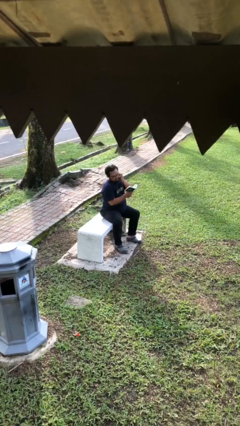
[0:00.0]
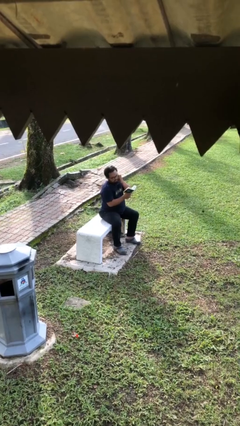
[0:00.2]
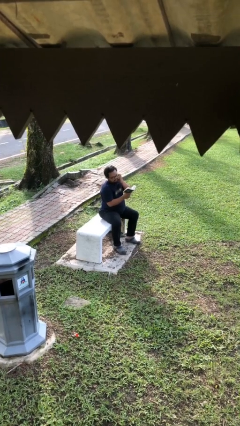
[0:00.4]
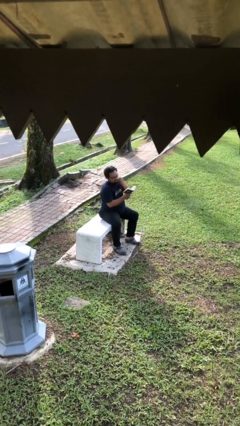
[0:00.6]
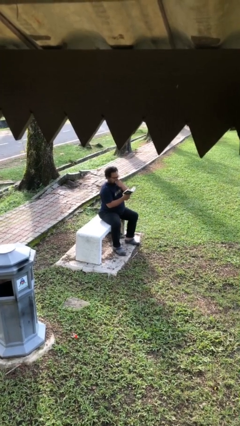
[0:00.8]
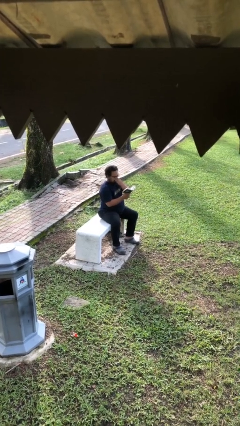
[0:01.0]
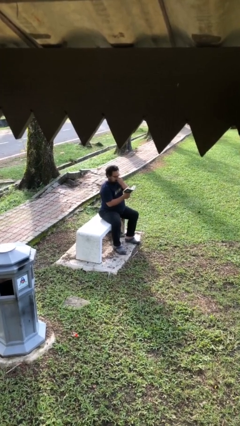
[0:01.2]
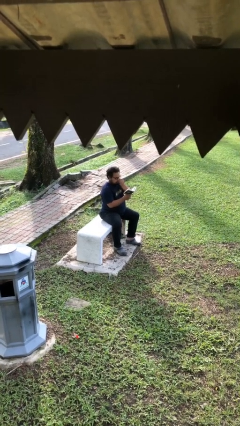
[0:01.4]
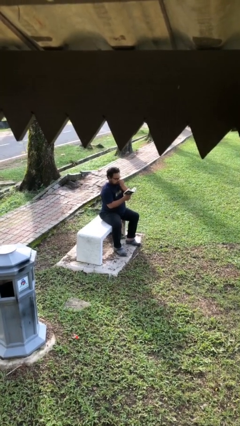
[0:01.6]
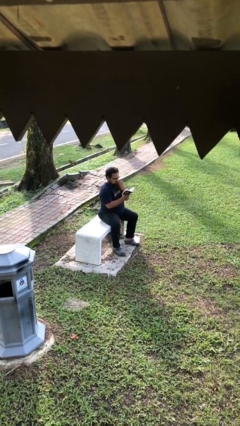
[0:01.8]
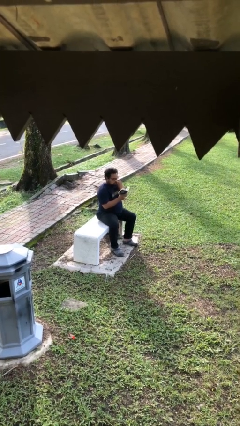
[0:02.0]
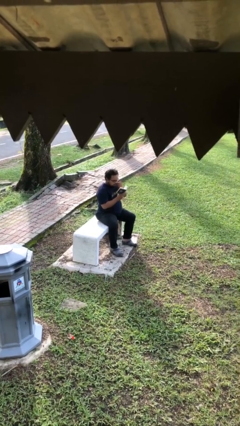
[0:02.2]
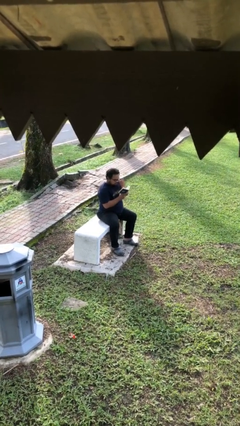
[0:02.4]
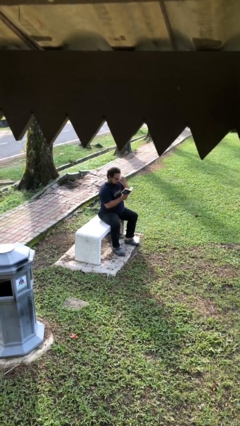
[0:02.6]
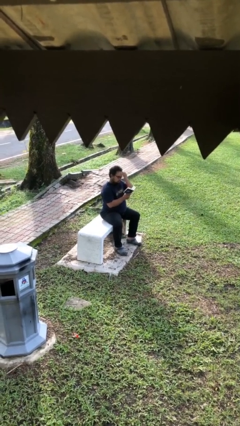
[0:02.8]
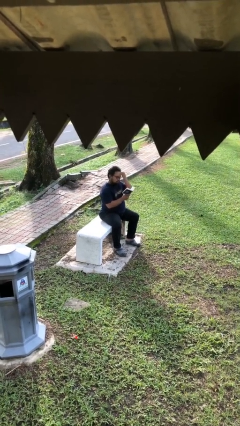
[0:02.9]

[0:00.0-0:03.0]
person reads document

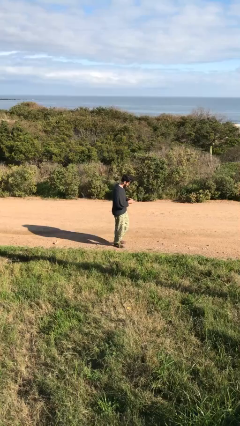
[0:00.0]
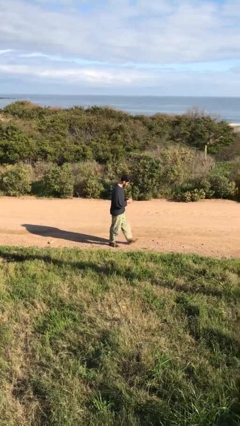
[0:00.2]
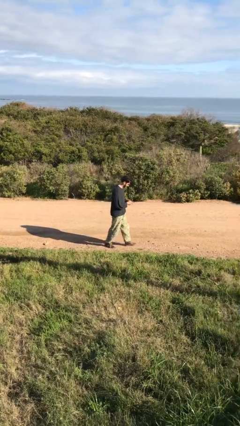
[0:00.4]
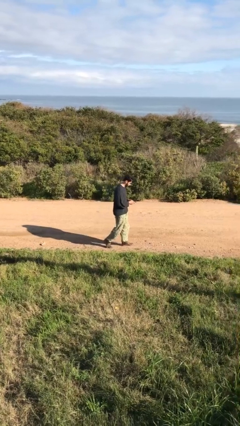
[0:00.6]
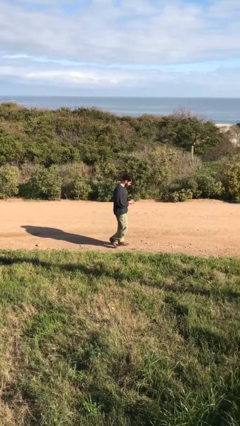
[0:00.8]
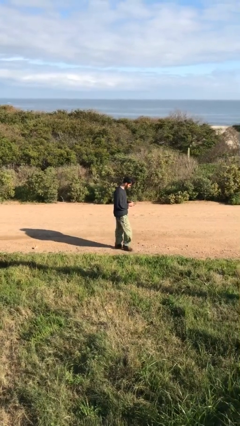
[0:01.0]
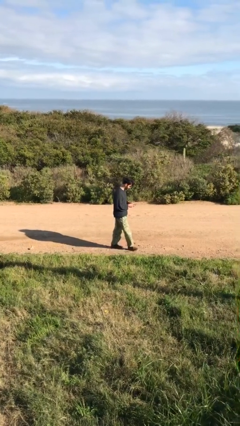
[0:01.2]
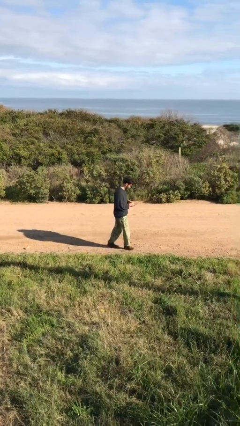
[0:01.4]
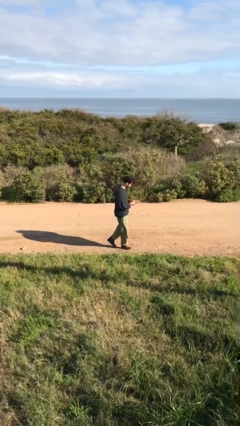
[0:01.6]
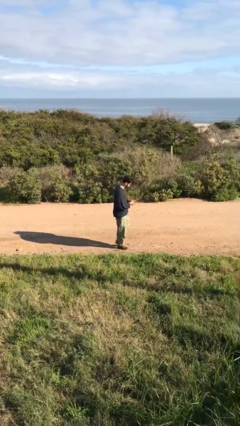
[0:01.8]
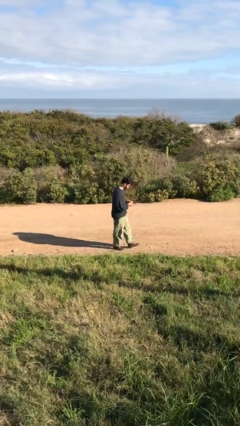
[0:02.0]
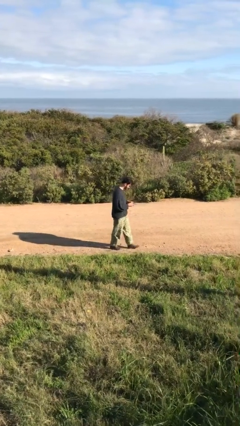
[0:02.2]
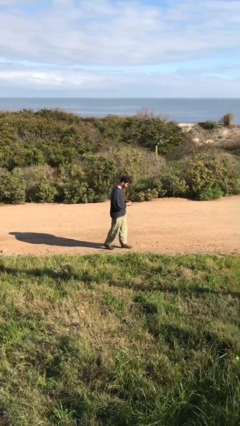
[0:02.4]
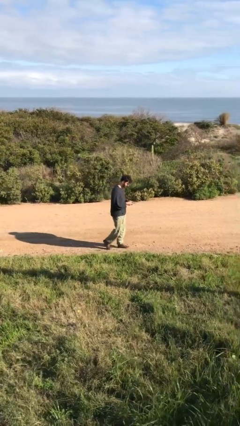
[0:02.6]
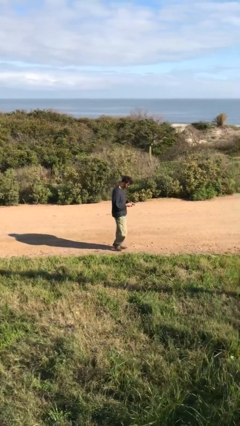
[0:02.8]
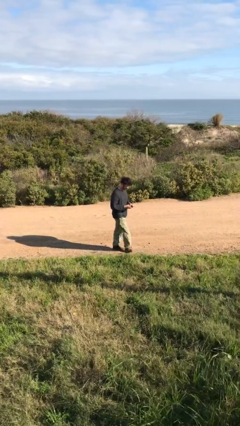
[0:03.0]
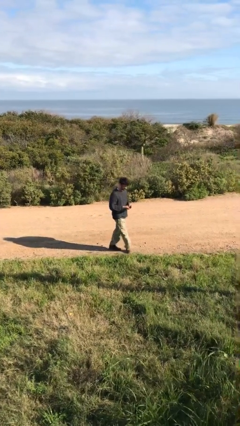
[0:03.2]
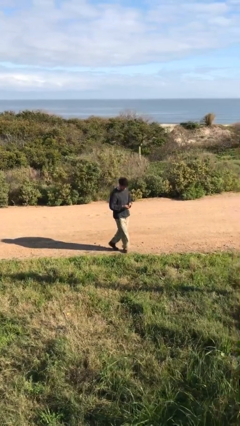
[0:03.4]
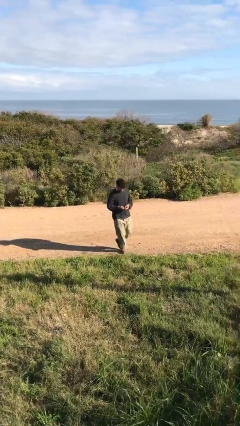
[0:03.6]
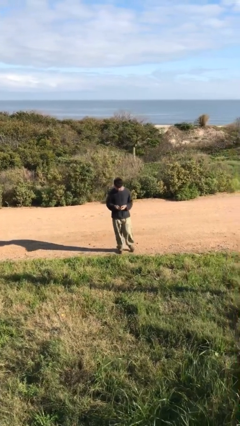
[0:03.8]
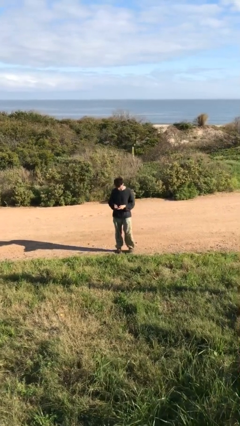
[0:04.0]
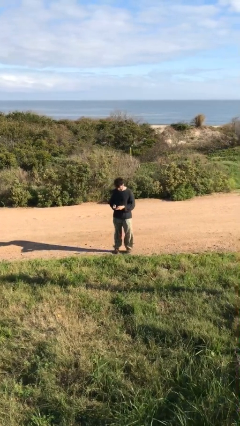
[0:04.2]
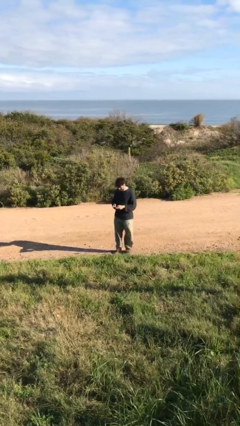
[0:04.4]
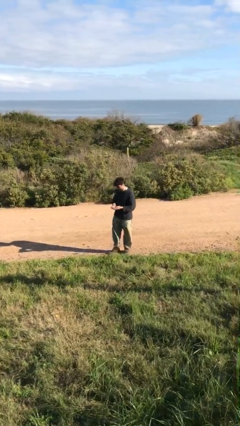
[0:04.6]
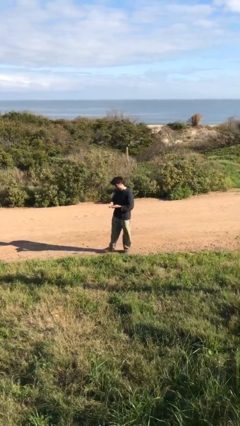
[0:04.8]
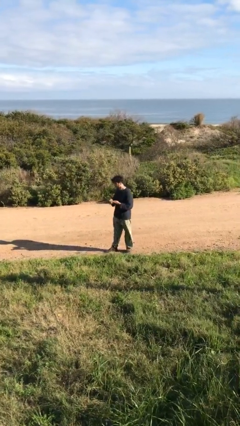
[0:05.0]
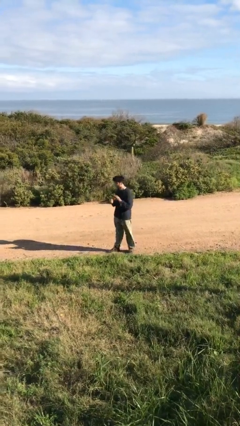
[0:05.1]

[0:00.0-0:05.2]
person texts on phone

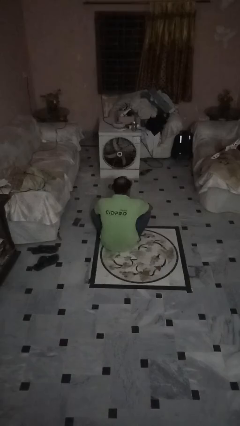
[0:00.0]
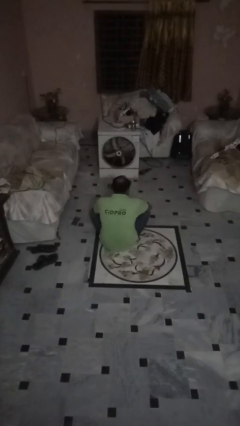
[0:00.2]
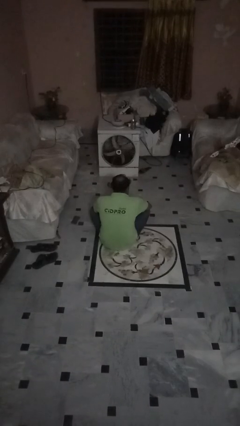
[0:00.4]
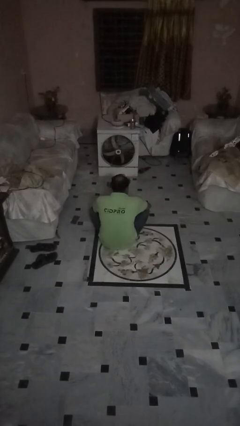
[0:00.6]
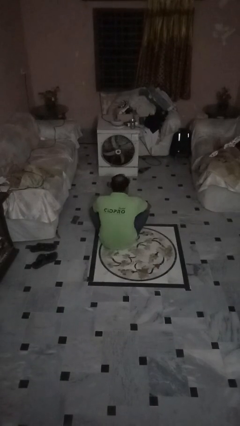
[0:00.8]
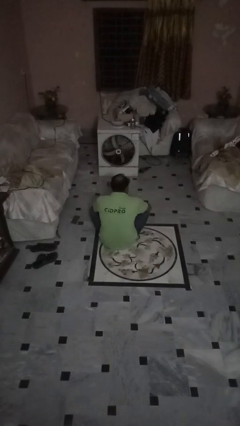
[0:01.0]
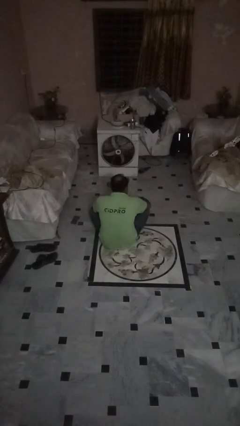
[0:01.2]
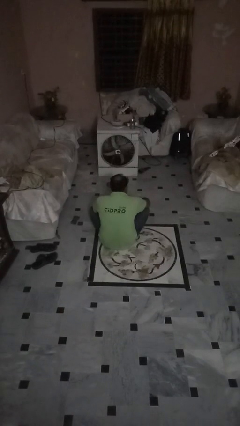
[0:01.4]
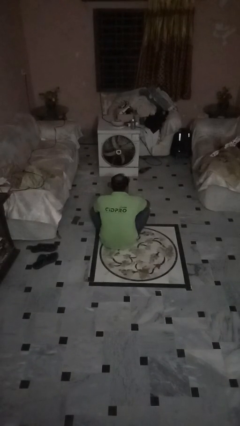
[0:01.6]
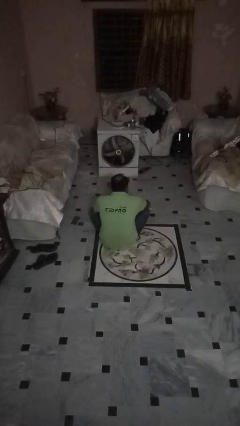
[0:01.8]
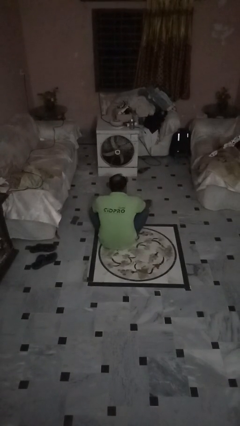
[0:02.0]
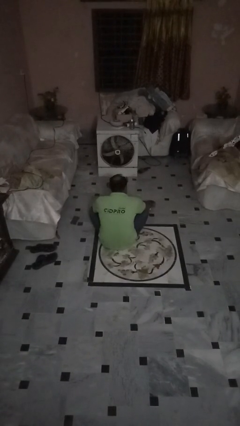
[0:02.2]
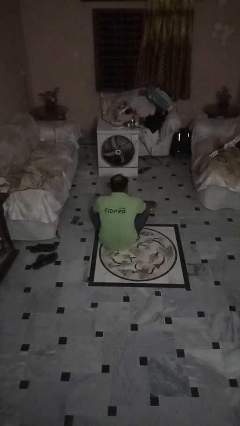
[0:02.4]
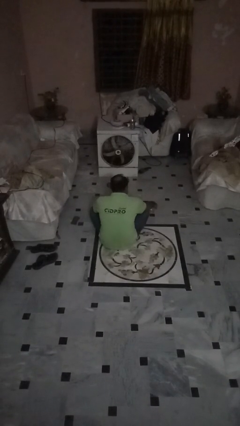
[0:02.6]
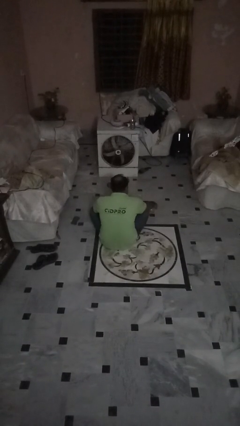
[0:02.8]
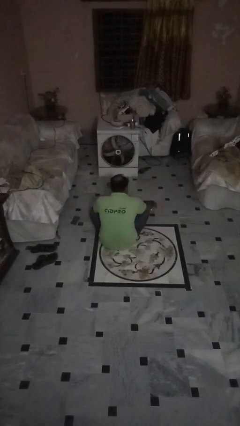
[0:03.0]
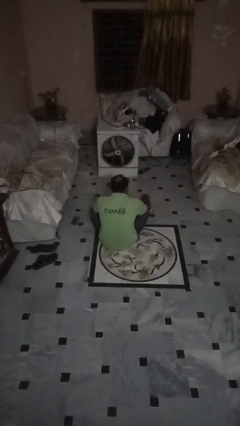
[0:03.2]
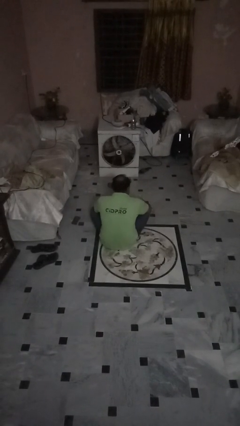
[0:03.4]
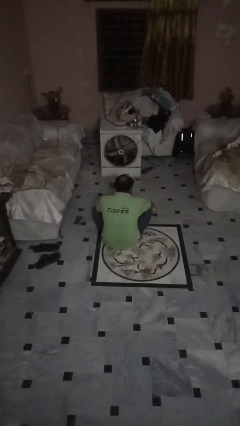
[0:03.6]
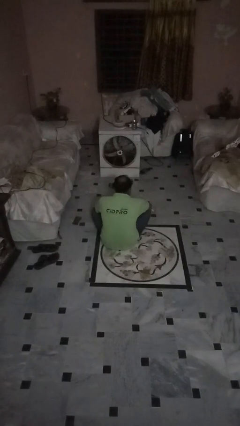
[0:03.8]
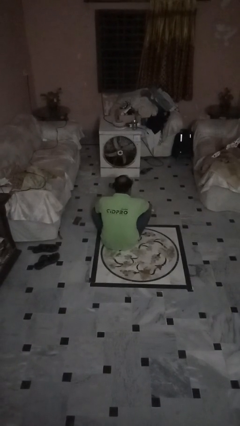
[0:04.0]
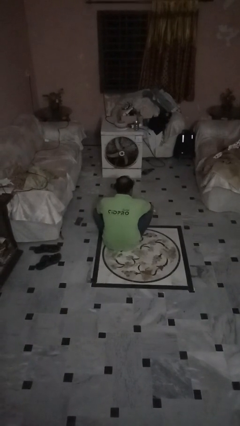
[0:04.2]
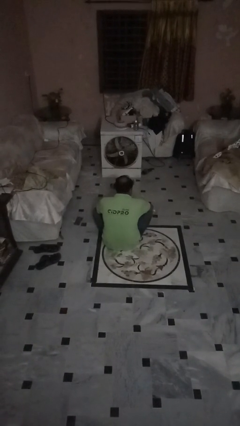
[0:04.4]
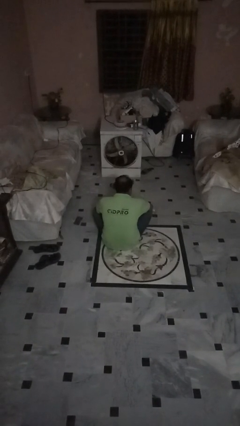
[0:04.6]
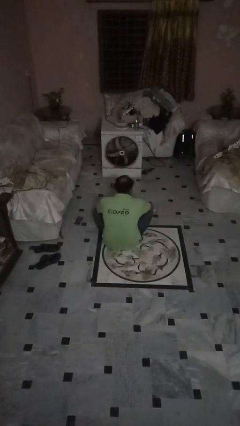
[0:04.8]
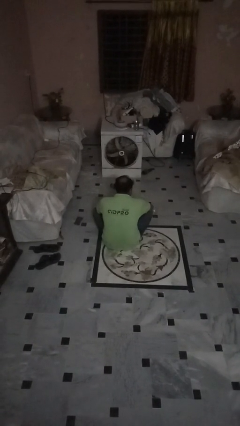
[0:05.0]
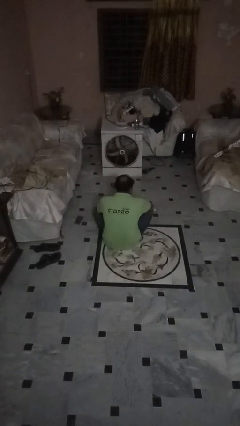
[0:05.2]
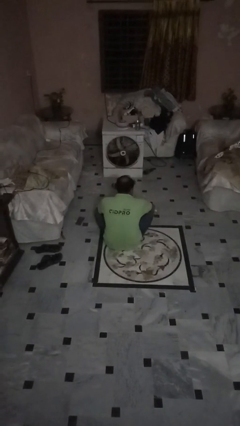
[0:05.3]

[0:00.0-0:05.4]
person sets upright glass

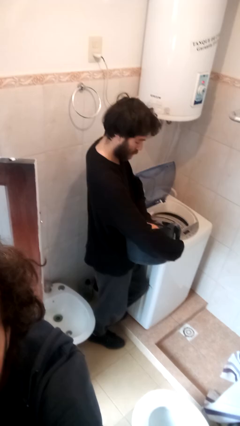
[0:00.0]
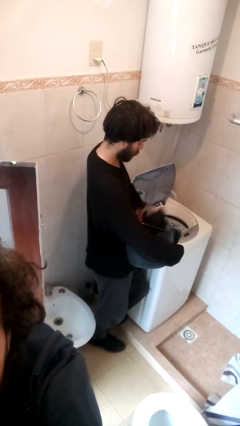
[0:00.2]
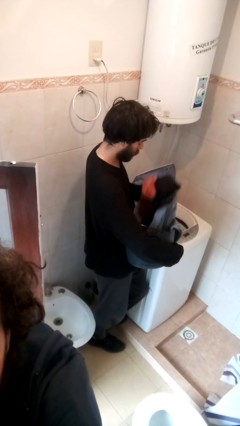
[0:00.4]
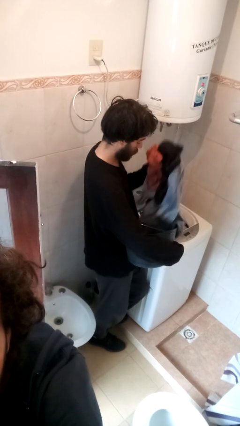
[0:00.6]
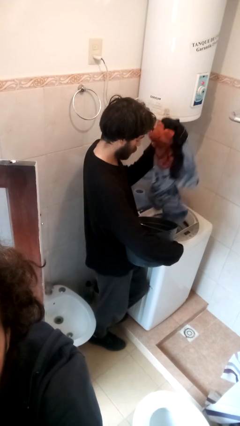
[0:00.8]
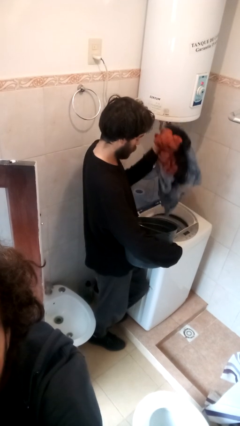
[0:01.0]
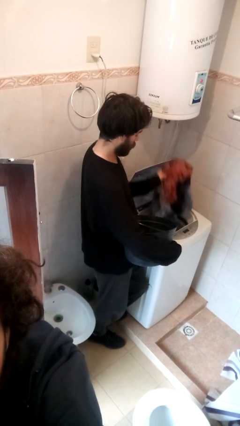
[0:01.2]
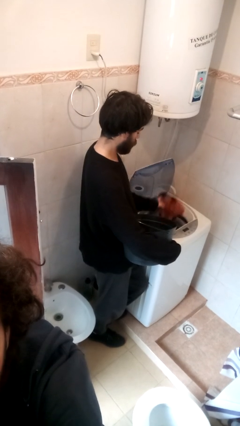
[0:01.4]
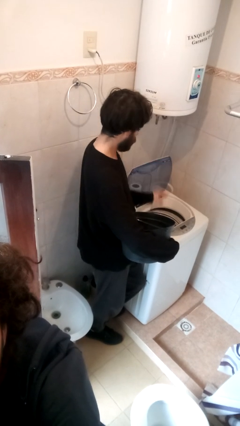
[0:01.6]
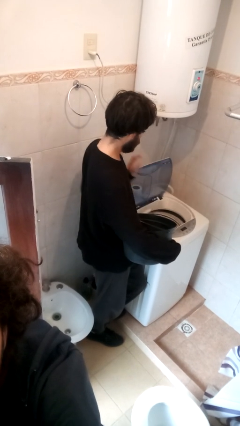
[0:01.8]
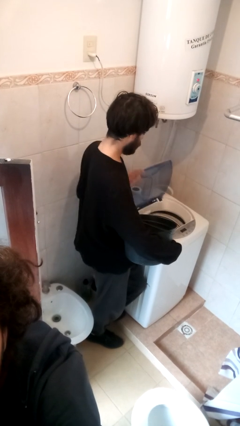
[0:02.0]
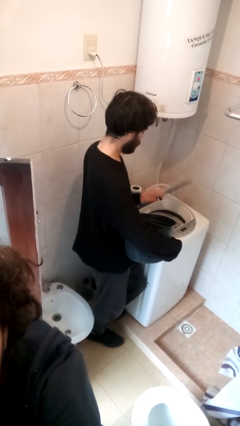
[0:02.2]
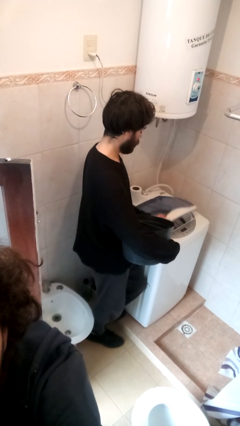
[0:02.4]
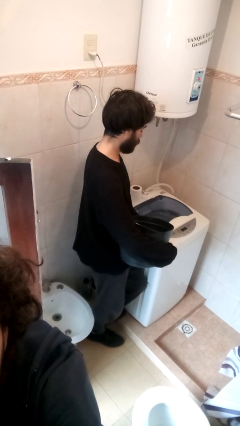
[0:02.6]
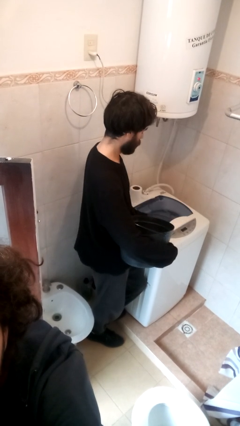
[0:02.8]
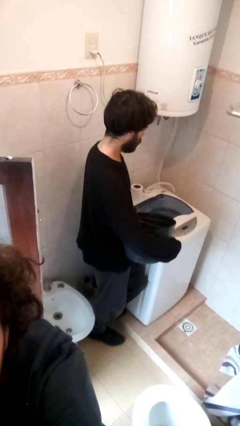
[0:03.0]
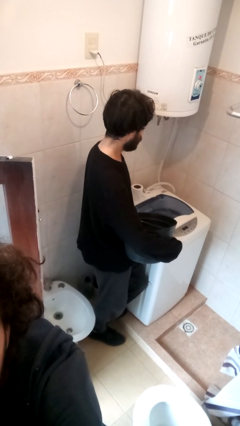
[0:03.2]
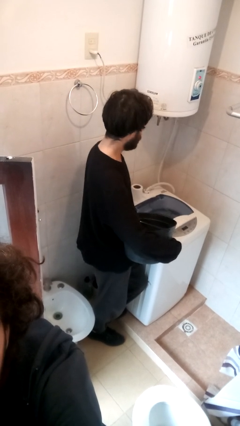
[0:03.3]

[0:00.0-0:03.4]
person loads clotheswasher

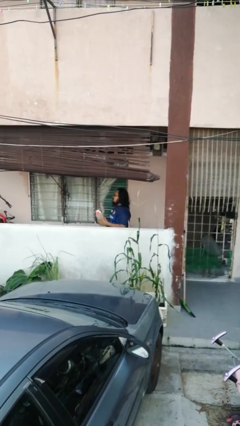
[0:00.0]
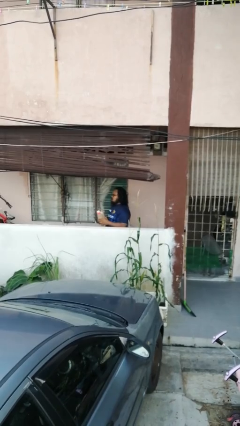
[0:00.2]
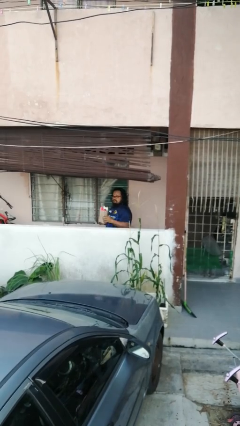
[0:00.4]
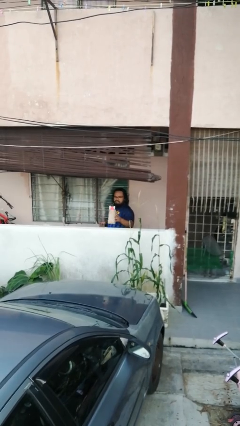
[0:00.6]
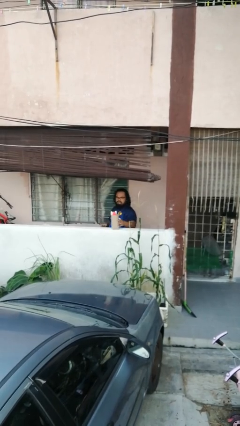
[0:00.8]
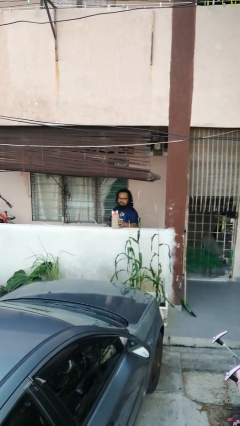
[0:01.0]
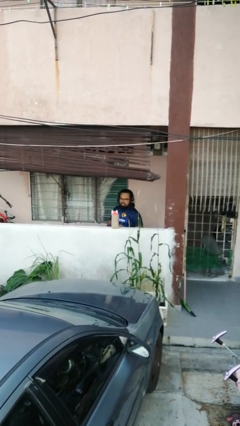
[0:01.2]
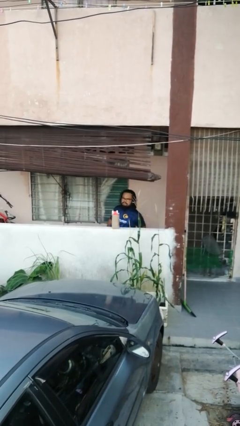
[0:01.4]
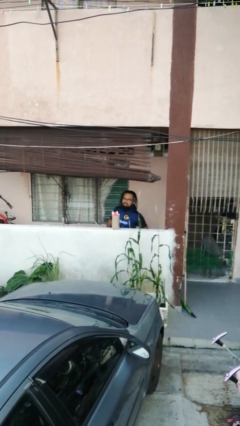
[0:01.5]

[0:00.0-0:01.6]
person puts down object on countertop
